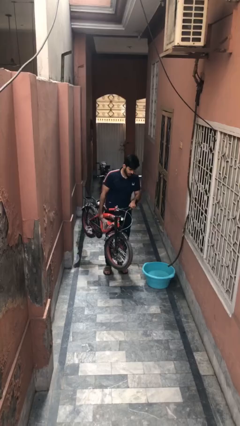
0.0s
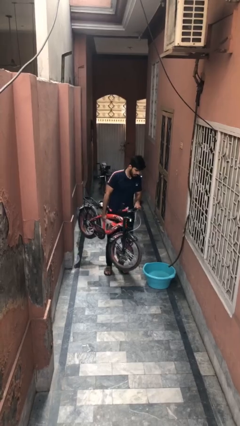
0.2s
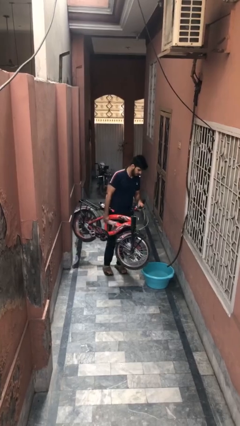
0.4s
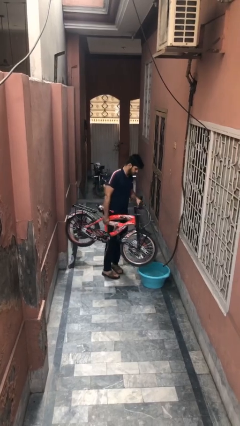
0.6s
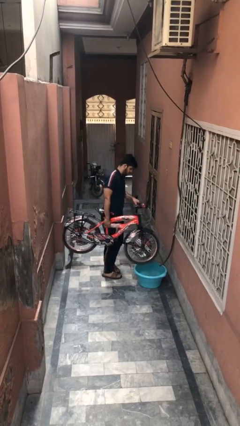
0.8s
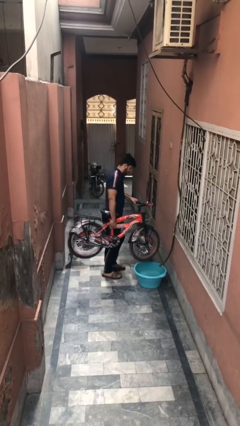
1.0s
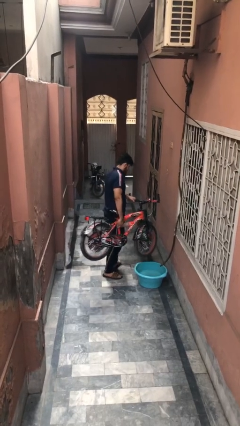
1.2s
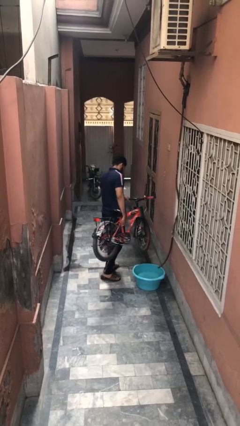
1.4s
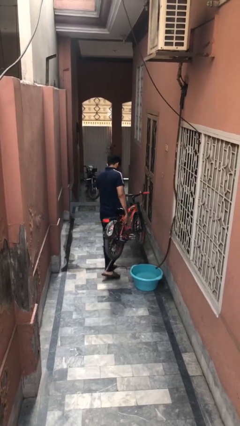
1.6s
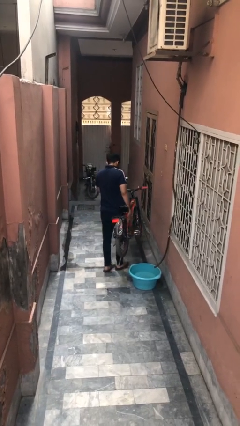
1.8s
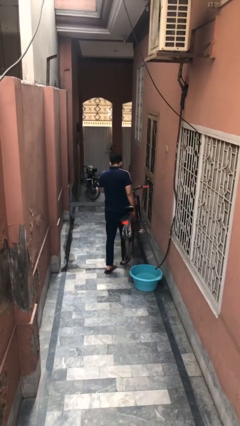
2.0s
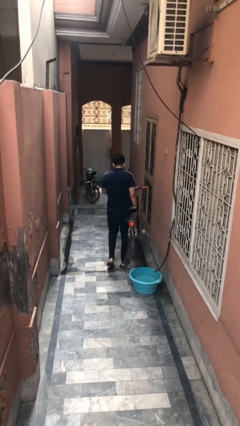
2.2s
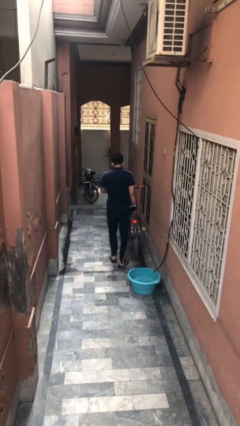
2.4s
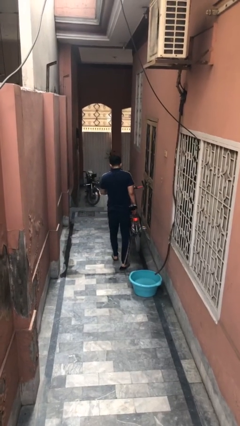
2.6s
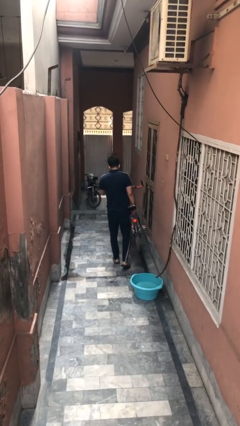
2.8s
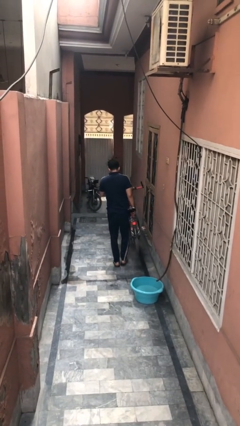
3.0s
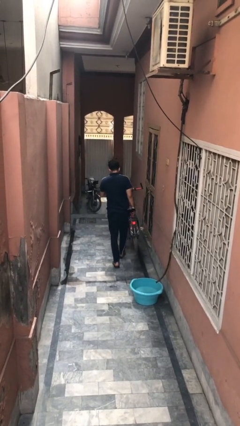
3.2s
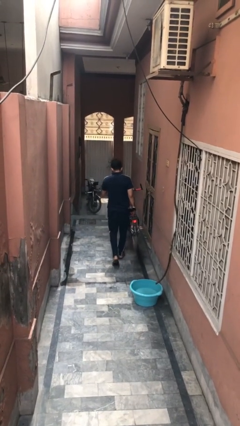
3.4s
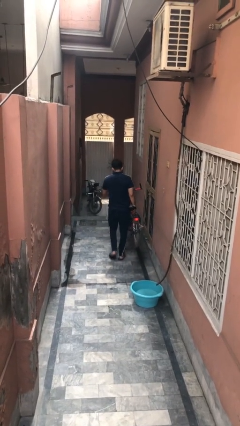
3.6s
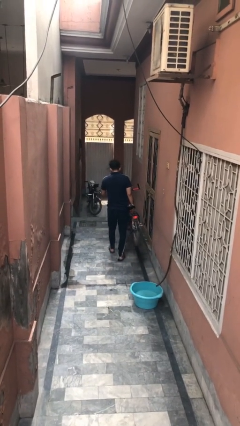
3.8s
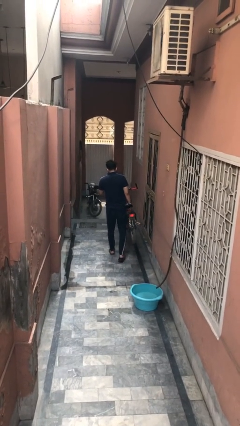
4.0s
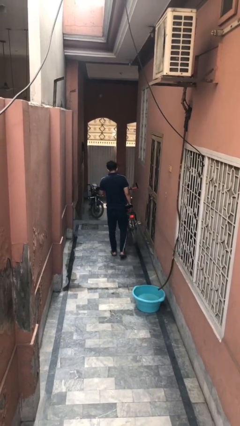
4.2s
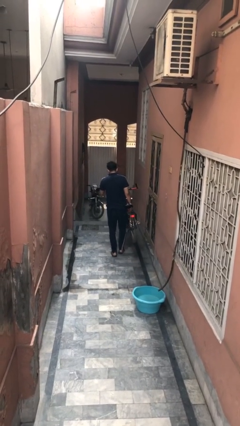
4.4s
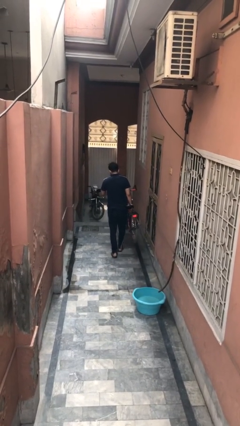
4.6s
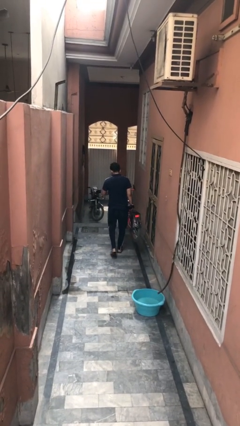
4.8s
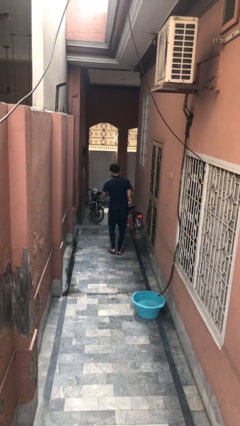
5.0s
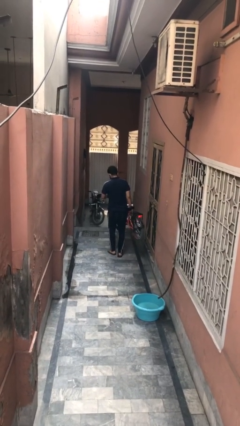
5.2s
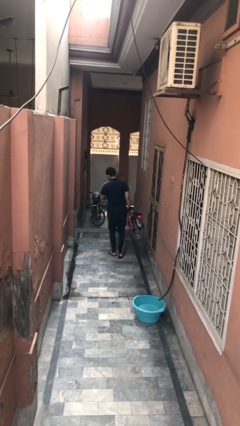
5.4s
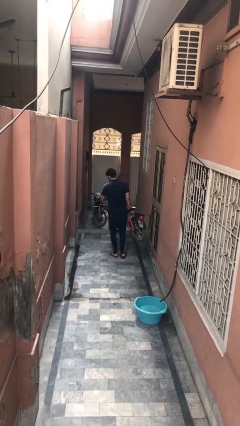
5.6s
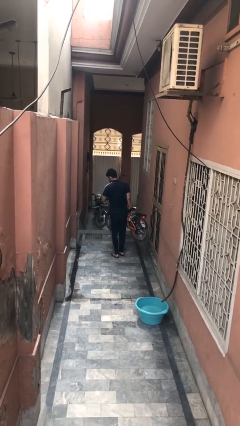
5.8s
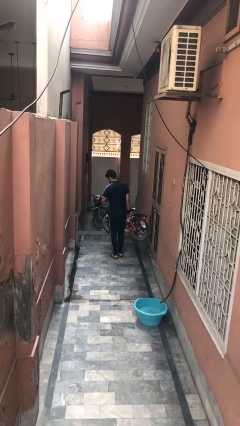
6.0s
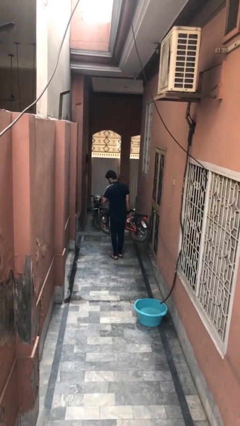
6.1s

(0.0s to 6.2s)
person carries bicycle

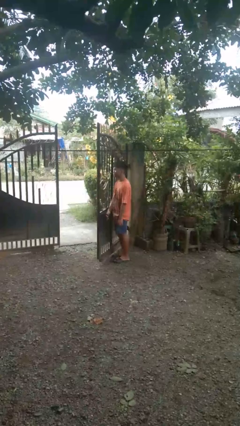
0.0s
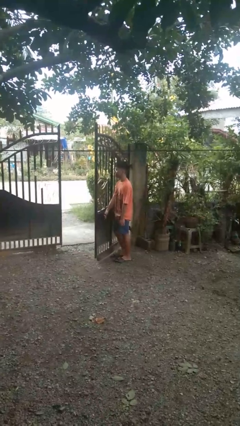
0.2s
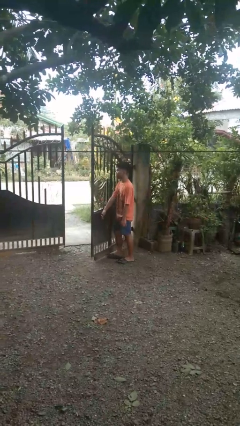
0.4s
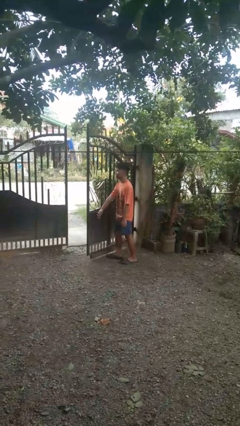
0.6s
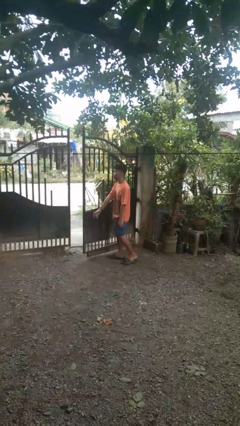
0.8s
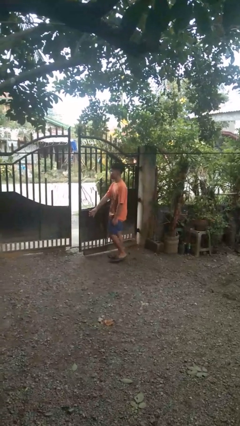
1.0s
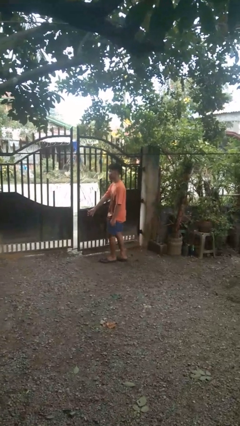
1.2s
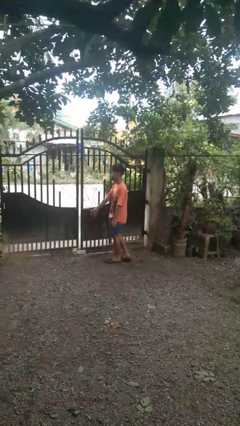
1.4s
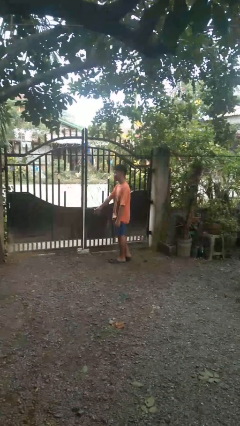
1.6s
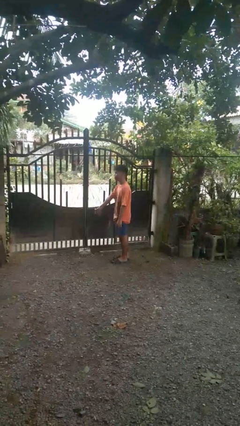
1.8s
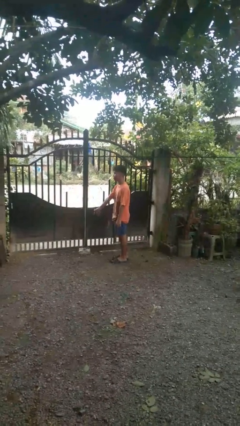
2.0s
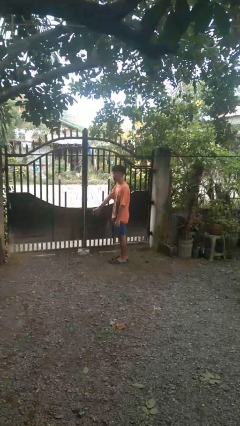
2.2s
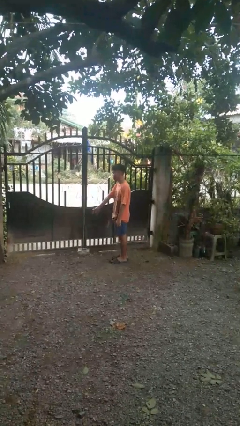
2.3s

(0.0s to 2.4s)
person closes gate

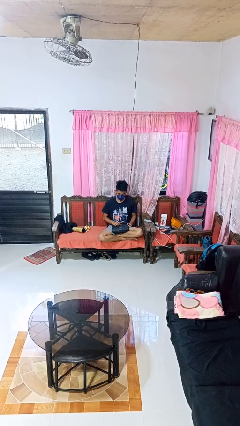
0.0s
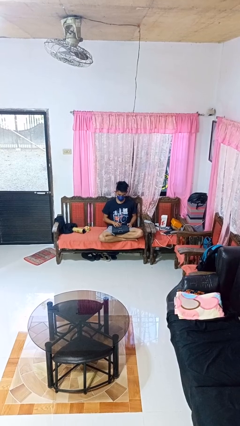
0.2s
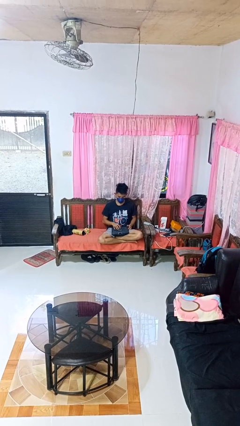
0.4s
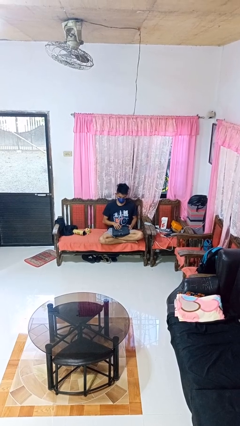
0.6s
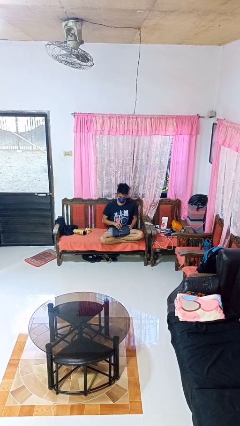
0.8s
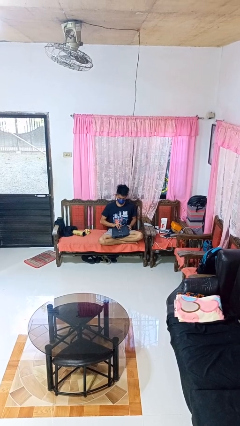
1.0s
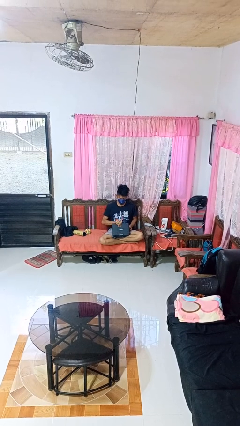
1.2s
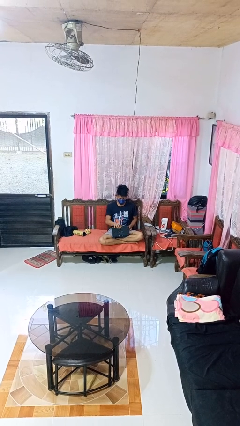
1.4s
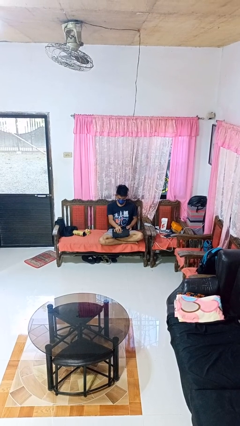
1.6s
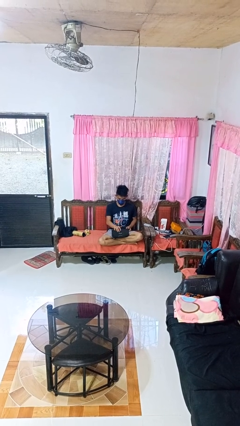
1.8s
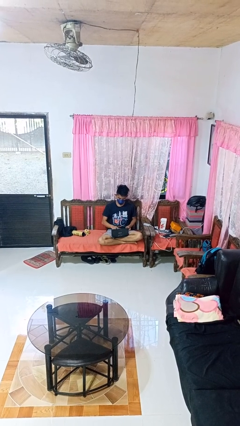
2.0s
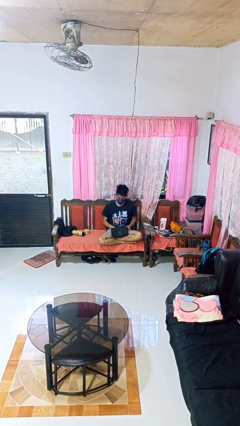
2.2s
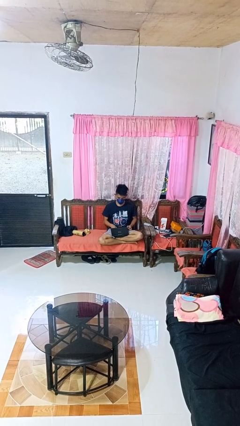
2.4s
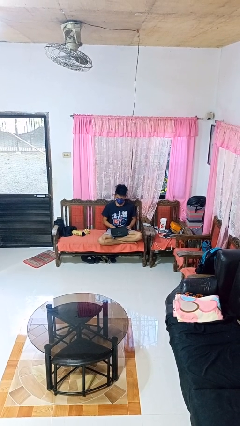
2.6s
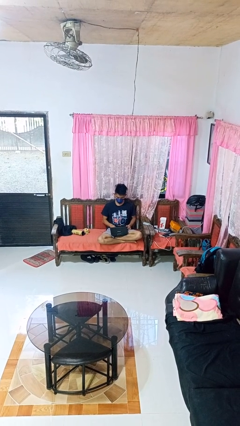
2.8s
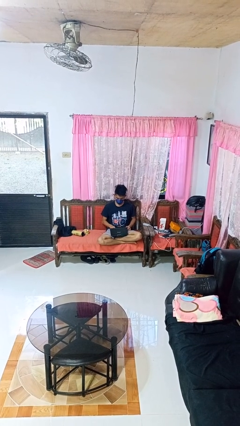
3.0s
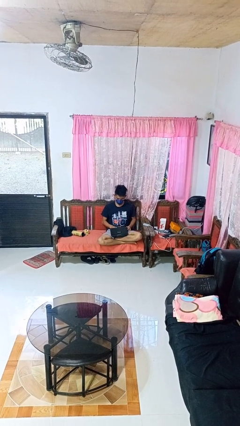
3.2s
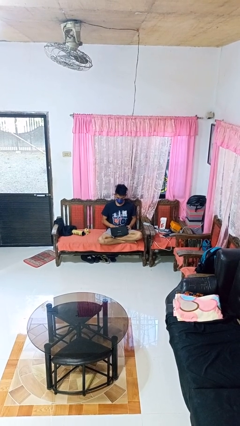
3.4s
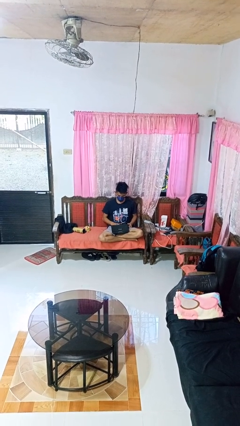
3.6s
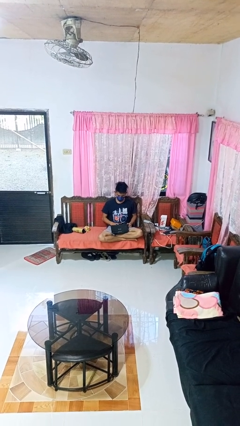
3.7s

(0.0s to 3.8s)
person opens laptop

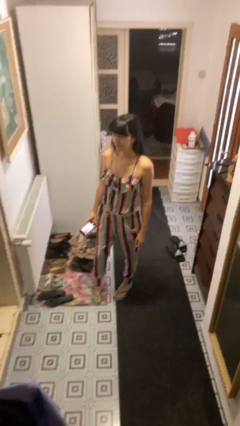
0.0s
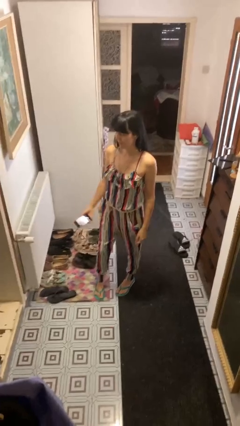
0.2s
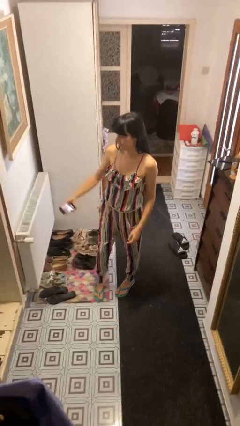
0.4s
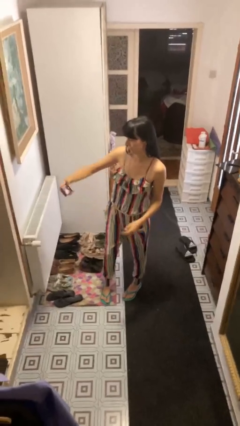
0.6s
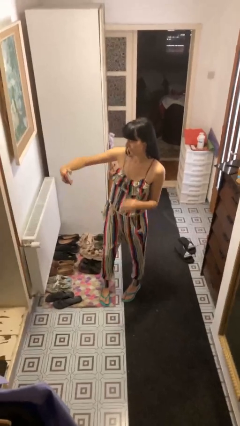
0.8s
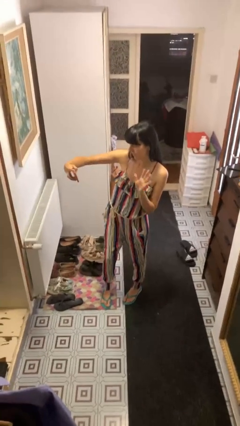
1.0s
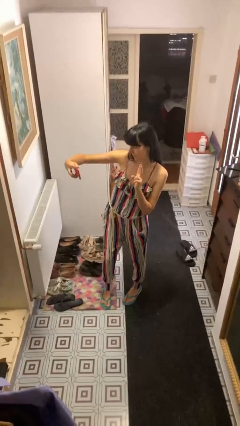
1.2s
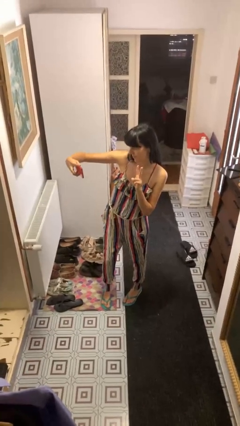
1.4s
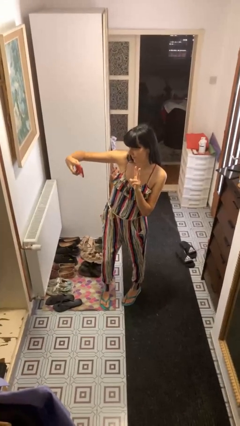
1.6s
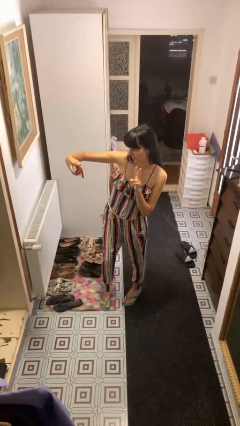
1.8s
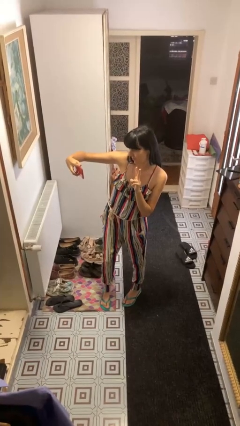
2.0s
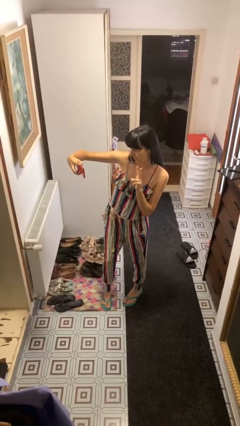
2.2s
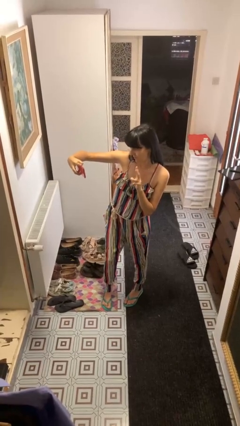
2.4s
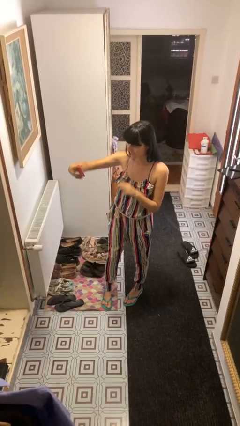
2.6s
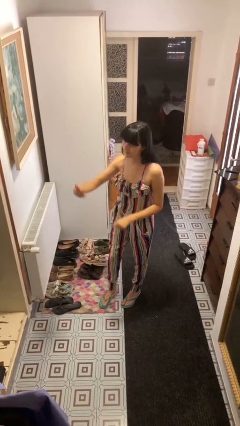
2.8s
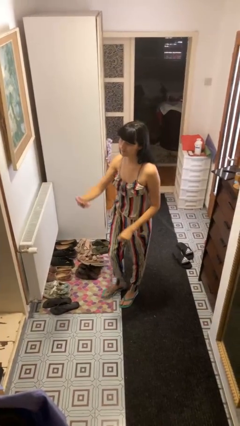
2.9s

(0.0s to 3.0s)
person takes selfie

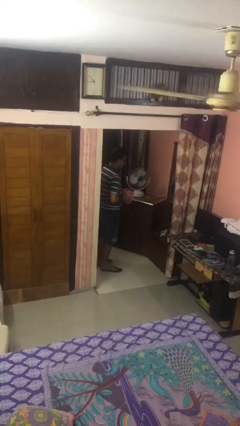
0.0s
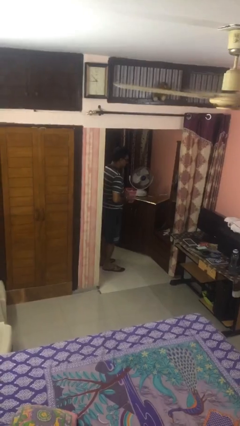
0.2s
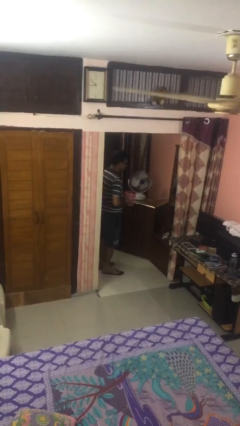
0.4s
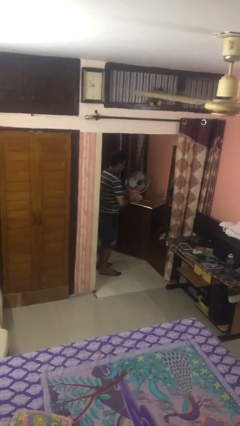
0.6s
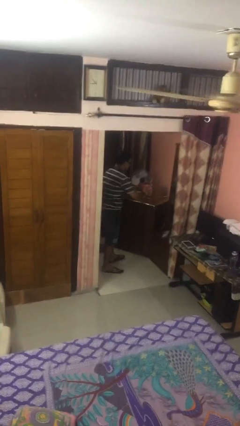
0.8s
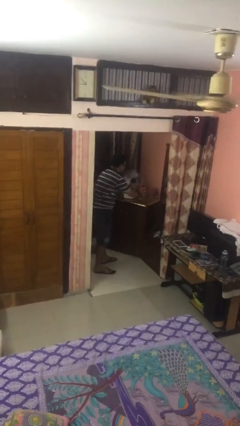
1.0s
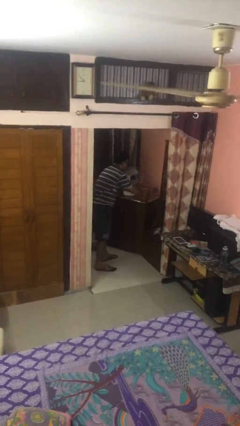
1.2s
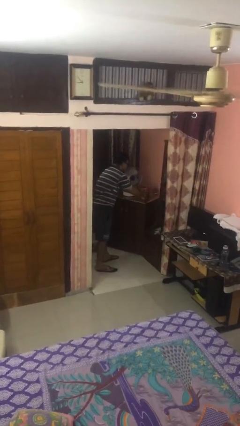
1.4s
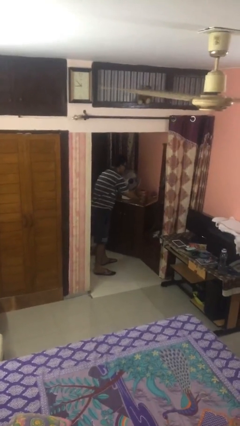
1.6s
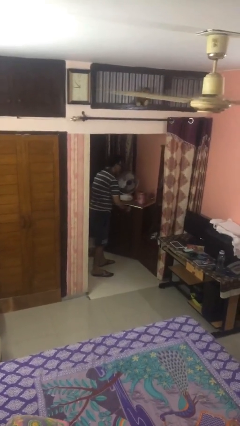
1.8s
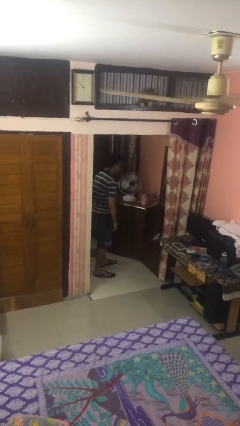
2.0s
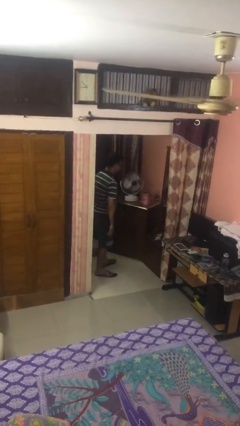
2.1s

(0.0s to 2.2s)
person puts down object on countertop
